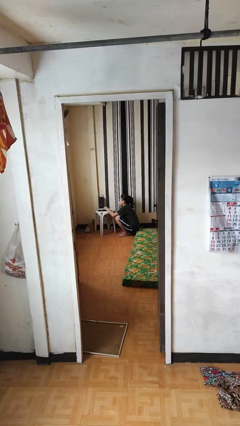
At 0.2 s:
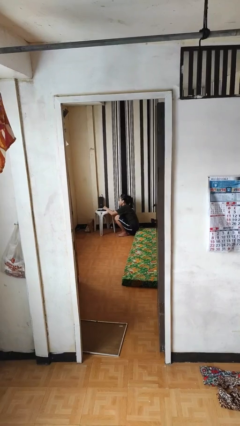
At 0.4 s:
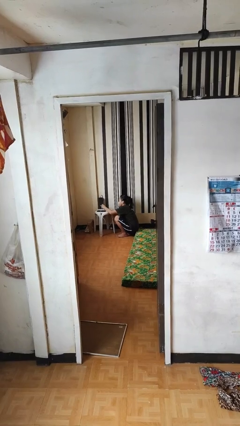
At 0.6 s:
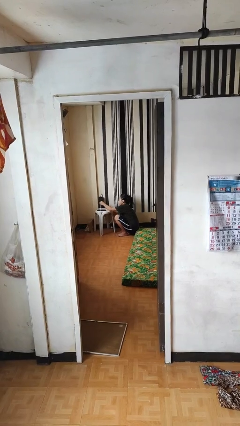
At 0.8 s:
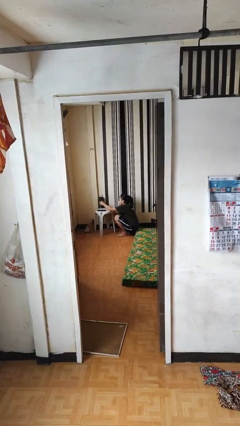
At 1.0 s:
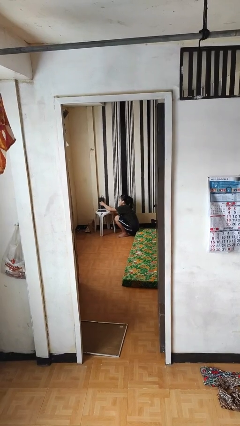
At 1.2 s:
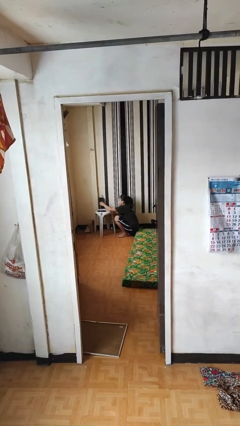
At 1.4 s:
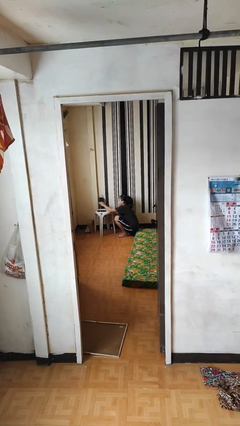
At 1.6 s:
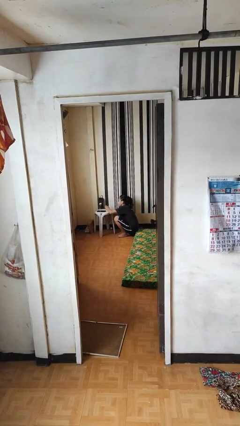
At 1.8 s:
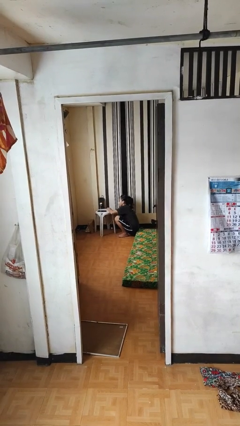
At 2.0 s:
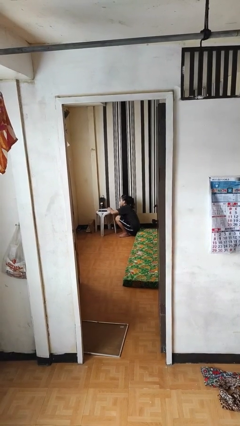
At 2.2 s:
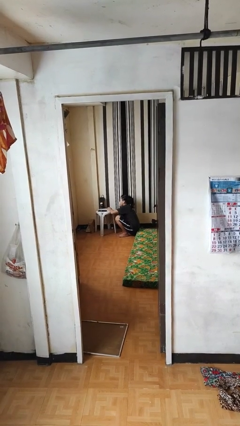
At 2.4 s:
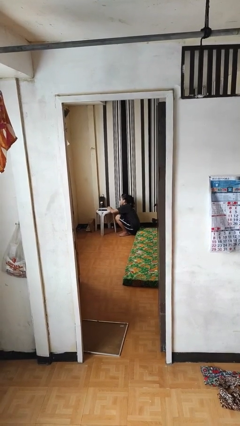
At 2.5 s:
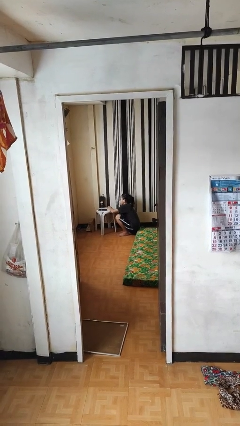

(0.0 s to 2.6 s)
person plugs into electrical socket

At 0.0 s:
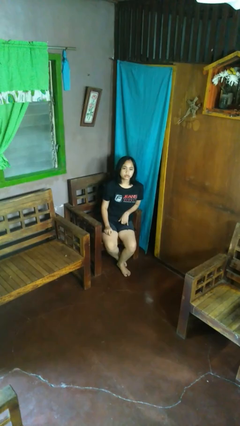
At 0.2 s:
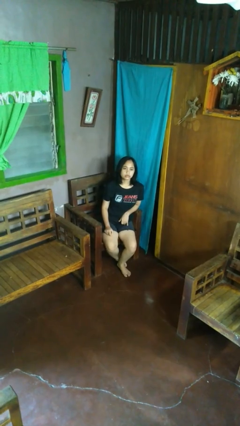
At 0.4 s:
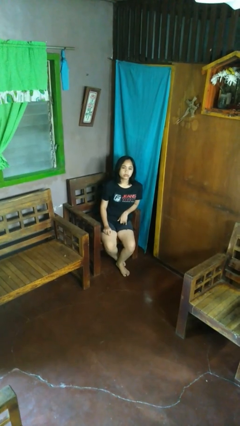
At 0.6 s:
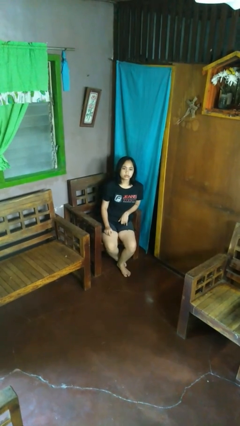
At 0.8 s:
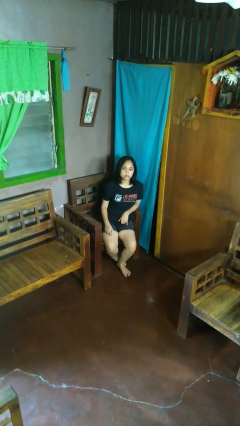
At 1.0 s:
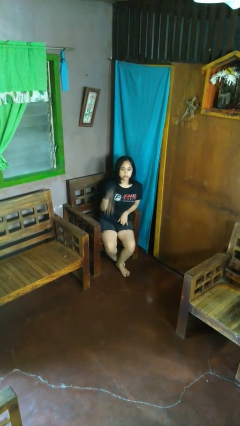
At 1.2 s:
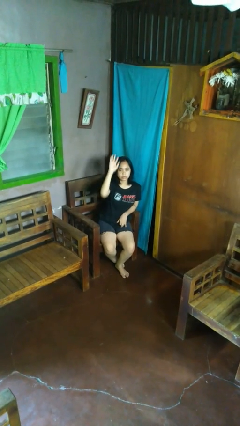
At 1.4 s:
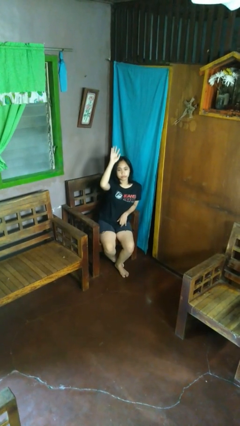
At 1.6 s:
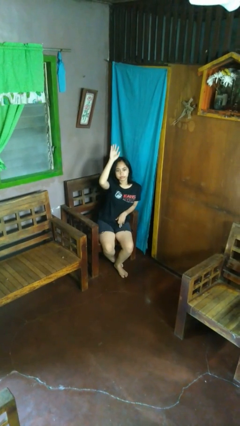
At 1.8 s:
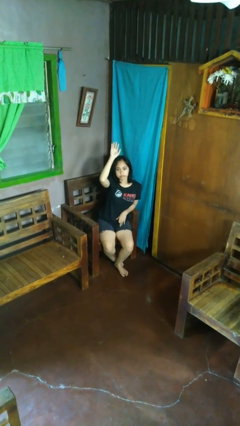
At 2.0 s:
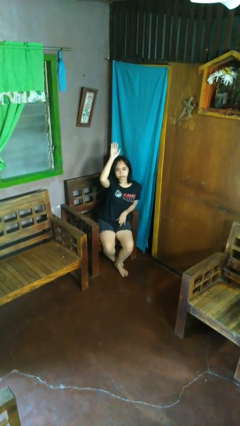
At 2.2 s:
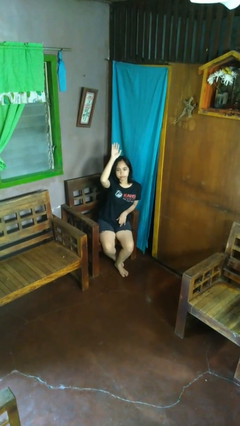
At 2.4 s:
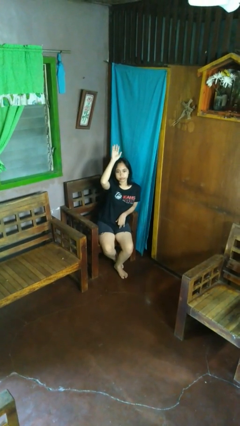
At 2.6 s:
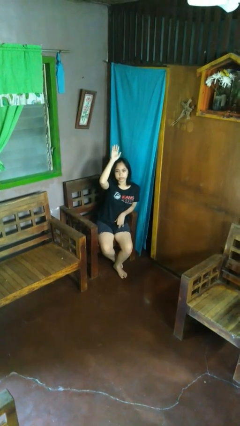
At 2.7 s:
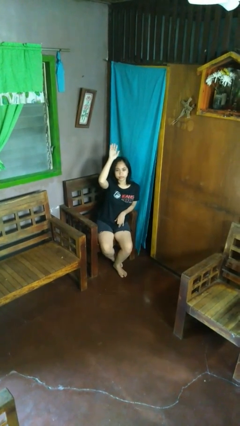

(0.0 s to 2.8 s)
person gestures raise hand

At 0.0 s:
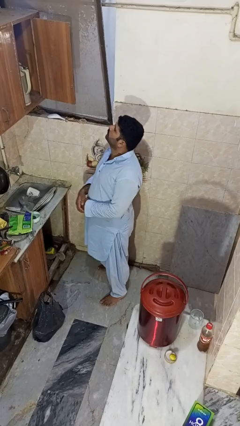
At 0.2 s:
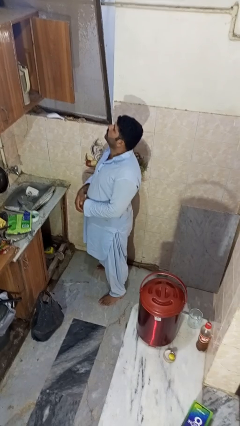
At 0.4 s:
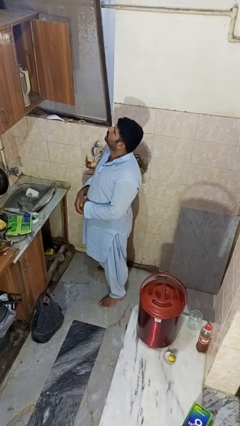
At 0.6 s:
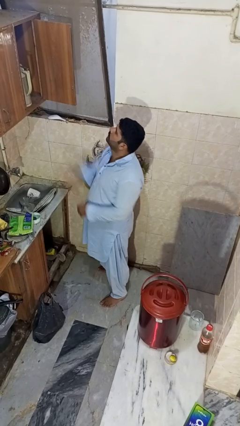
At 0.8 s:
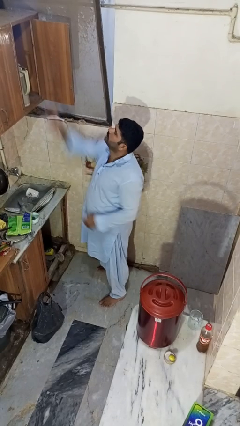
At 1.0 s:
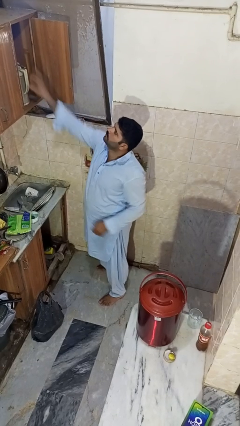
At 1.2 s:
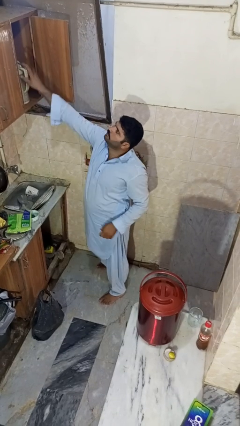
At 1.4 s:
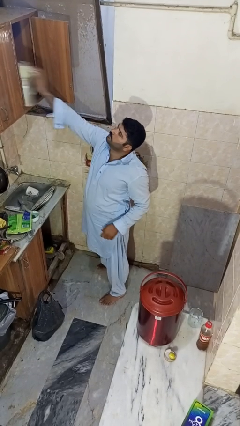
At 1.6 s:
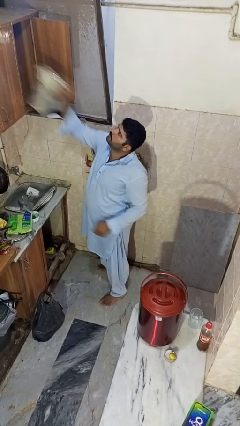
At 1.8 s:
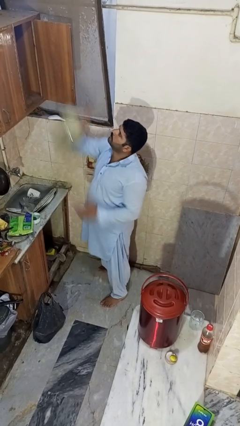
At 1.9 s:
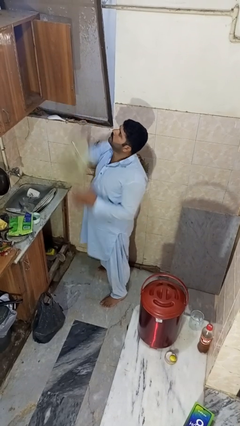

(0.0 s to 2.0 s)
person takes object from cabinet

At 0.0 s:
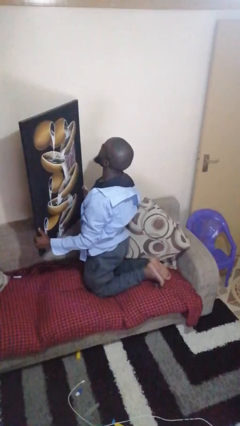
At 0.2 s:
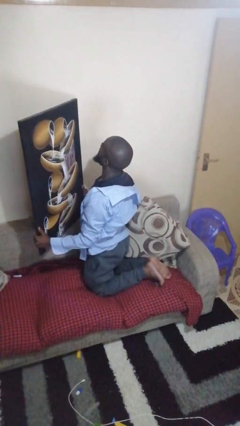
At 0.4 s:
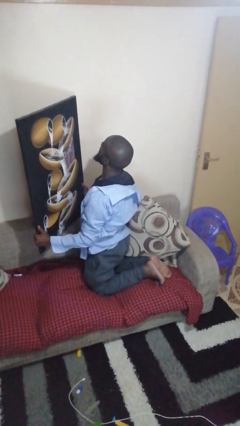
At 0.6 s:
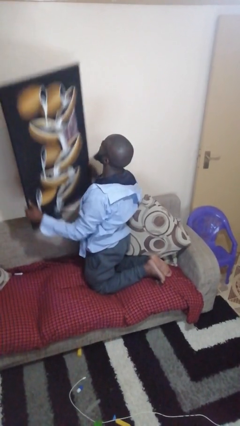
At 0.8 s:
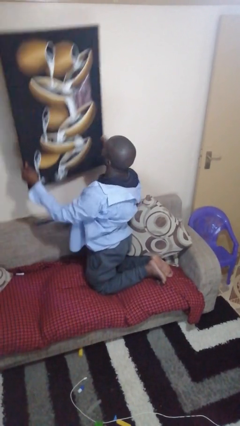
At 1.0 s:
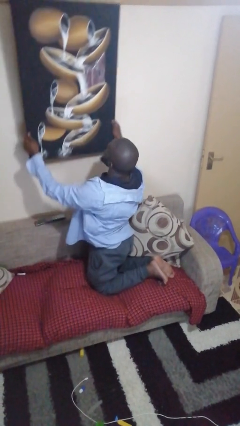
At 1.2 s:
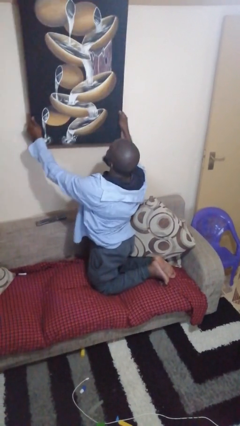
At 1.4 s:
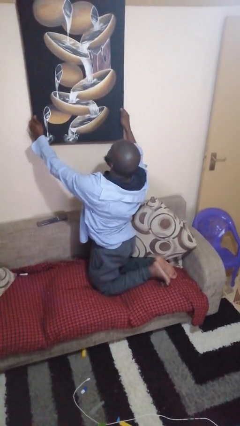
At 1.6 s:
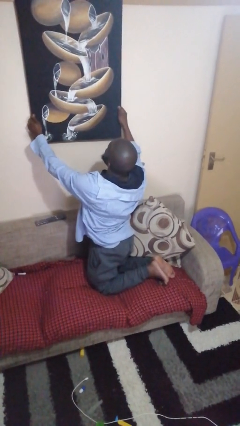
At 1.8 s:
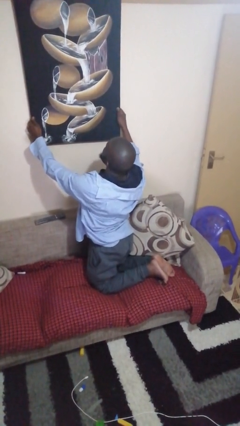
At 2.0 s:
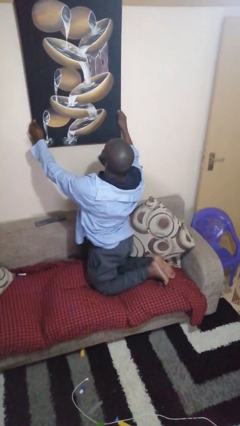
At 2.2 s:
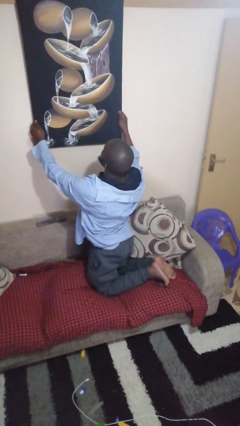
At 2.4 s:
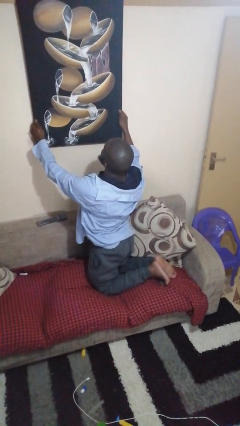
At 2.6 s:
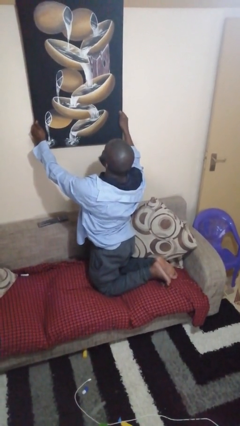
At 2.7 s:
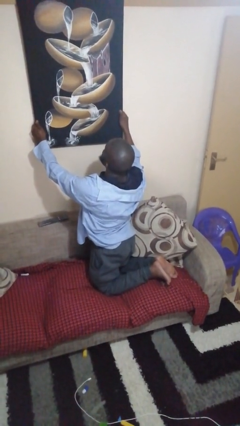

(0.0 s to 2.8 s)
person puts up picture frame

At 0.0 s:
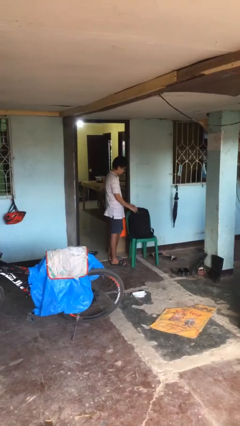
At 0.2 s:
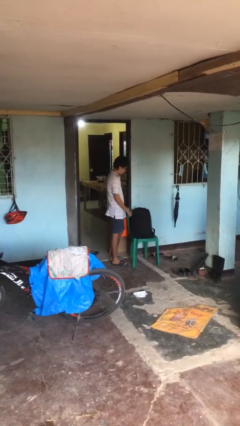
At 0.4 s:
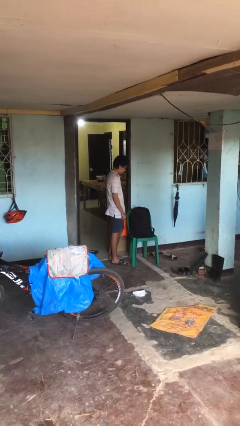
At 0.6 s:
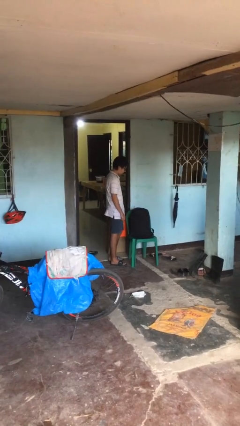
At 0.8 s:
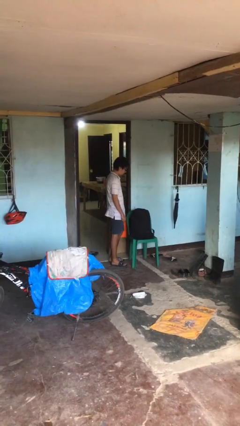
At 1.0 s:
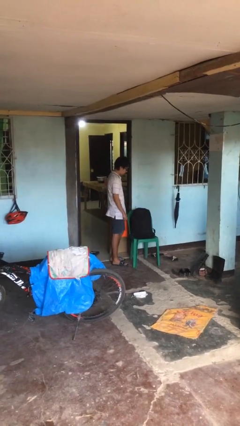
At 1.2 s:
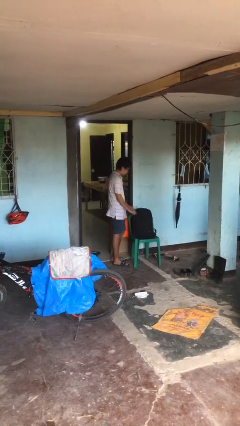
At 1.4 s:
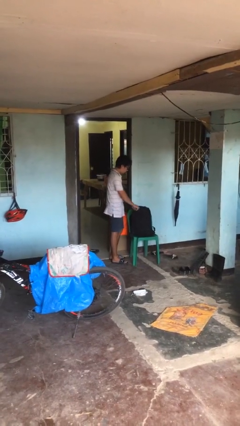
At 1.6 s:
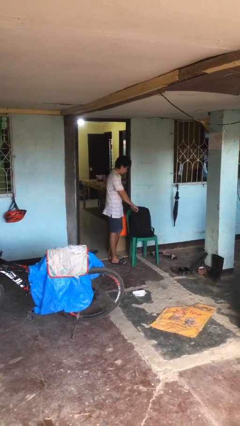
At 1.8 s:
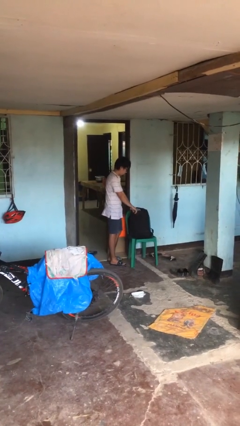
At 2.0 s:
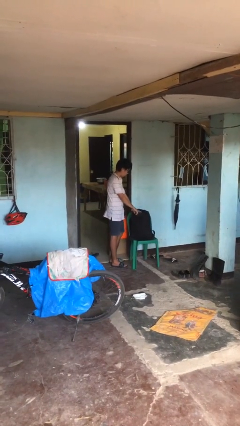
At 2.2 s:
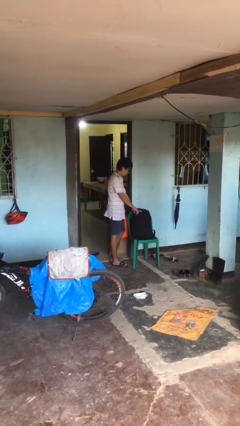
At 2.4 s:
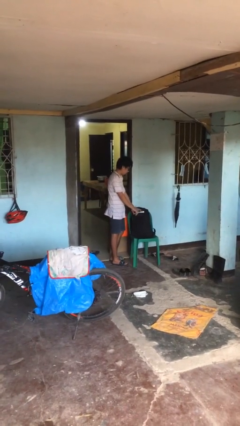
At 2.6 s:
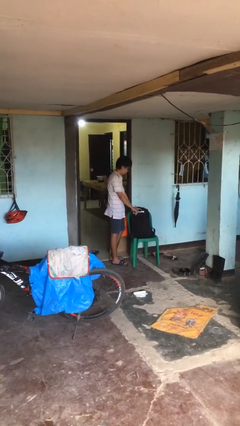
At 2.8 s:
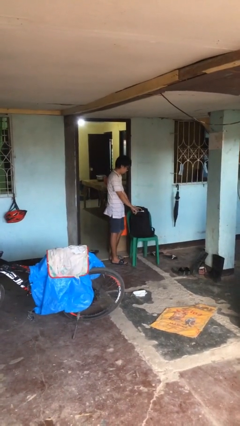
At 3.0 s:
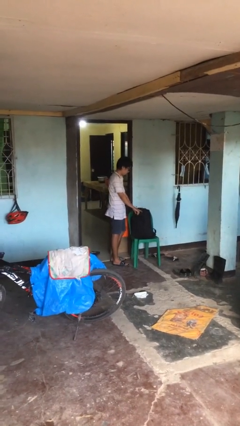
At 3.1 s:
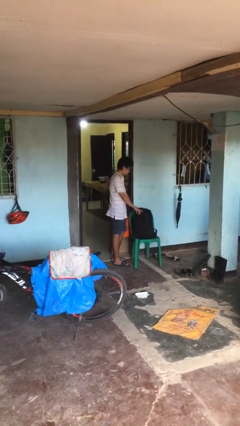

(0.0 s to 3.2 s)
person searches in backpack

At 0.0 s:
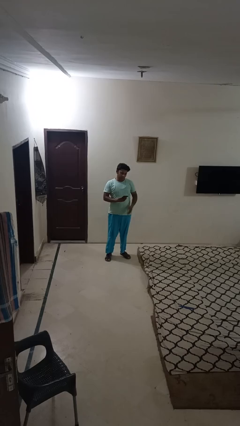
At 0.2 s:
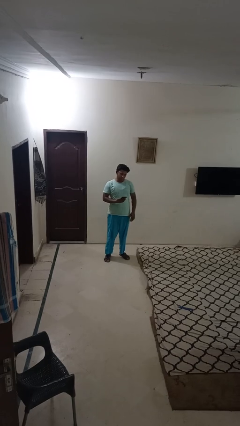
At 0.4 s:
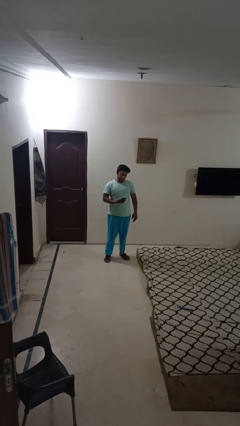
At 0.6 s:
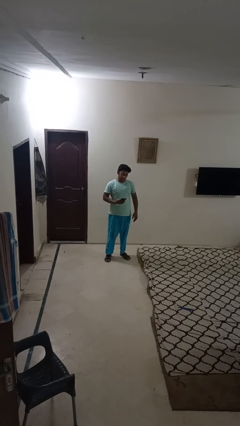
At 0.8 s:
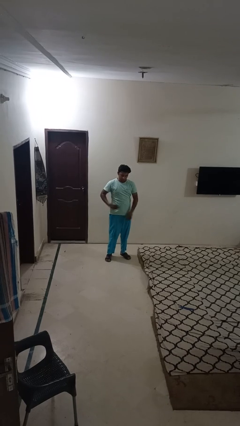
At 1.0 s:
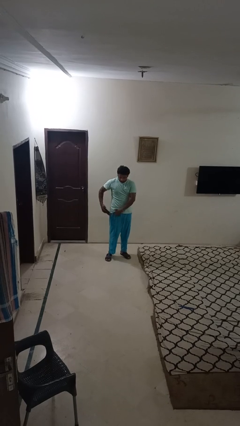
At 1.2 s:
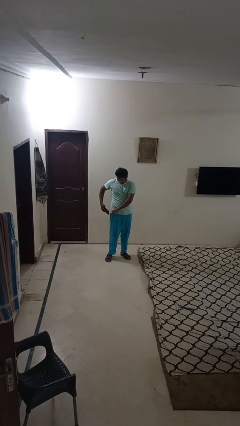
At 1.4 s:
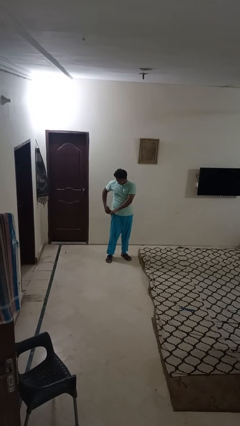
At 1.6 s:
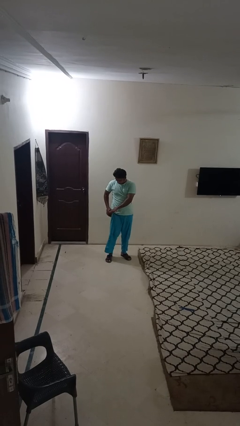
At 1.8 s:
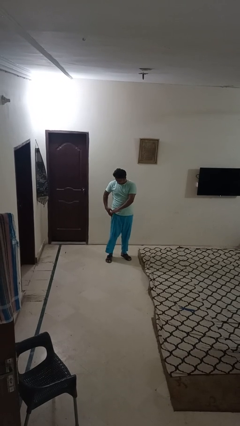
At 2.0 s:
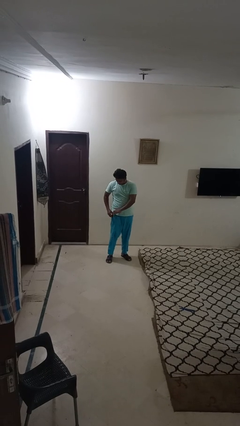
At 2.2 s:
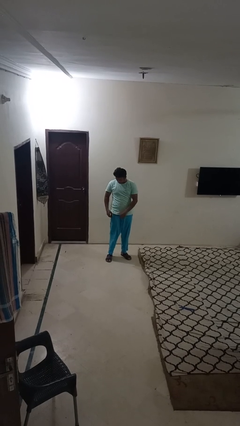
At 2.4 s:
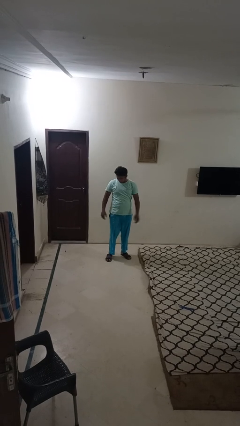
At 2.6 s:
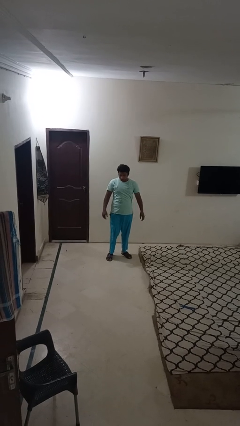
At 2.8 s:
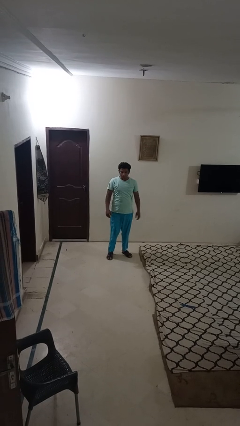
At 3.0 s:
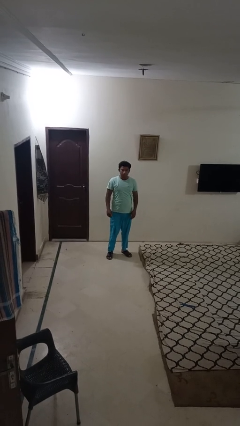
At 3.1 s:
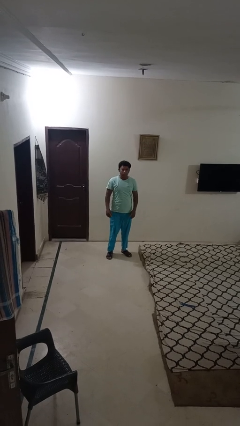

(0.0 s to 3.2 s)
person puts phone into pocket

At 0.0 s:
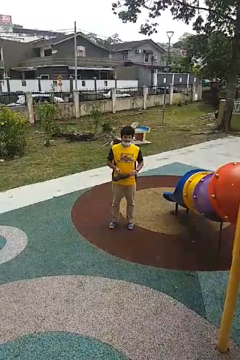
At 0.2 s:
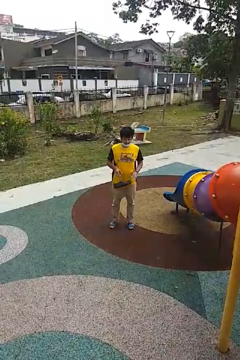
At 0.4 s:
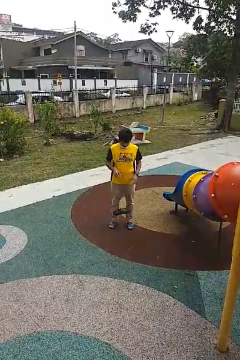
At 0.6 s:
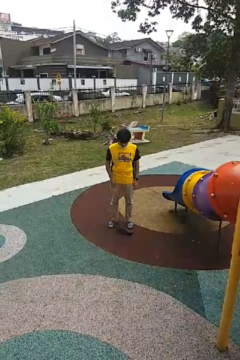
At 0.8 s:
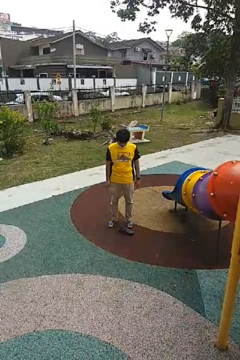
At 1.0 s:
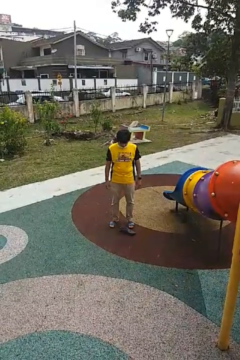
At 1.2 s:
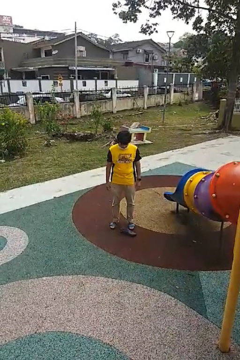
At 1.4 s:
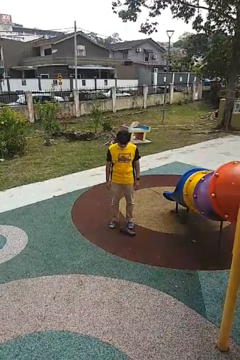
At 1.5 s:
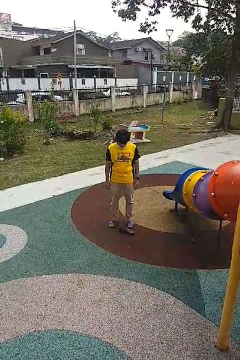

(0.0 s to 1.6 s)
person drops object
